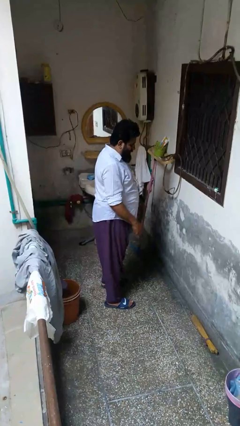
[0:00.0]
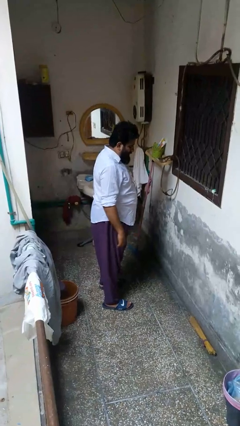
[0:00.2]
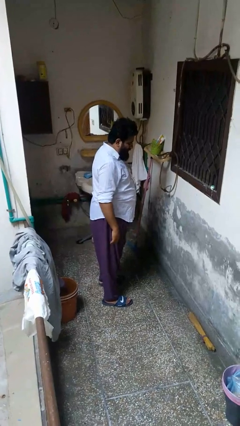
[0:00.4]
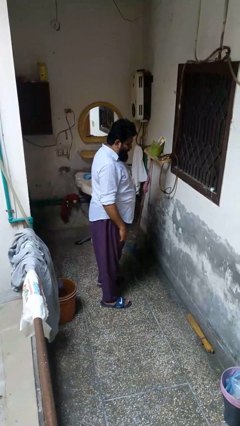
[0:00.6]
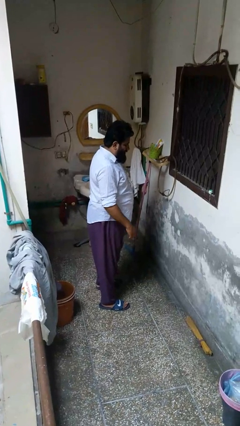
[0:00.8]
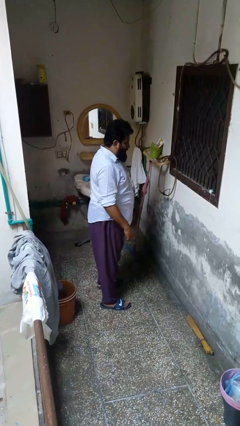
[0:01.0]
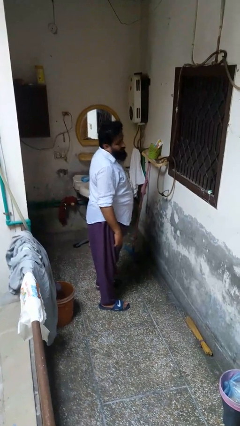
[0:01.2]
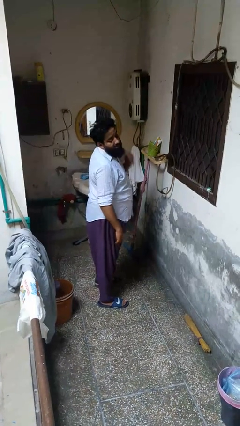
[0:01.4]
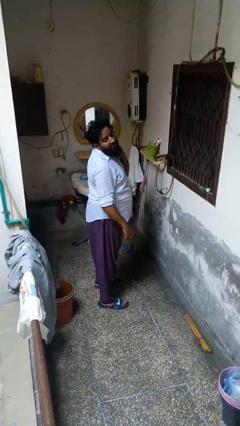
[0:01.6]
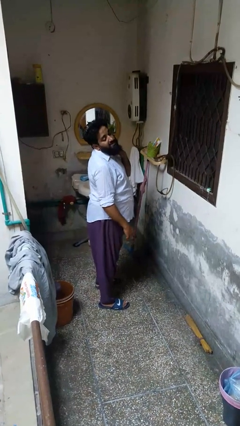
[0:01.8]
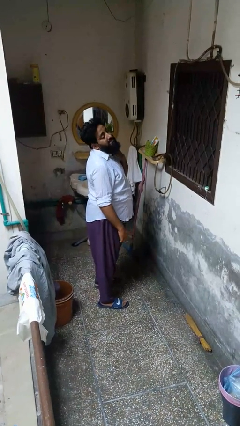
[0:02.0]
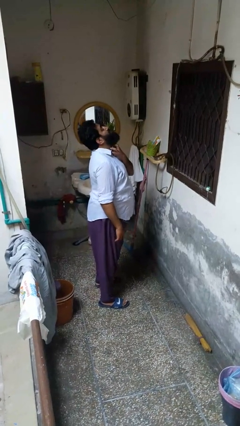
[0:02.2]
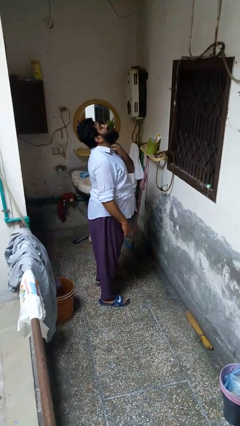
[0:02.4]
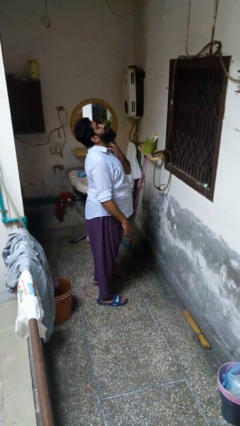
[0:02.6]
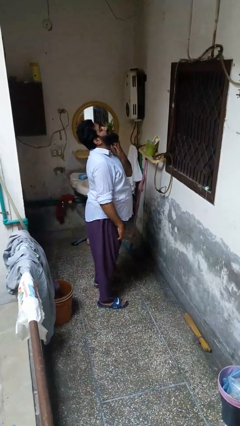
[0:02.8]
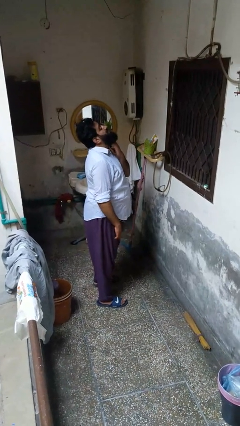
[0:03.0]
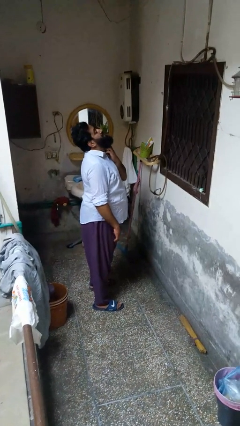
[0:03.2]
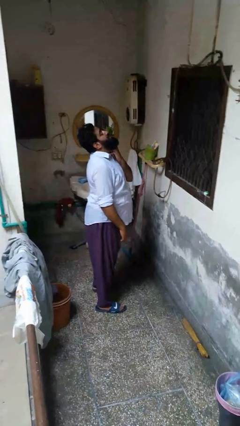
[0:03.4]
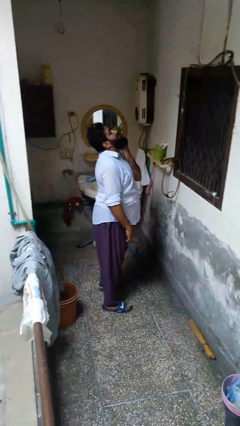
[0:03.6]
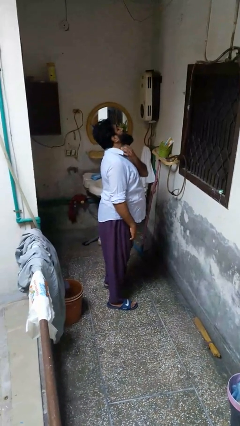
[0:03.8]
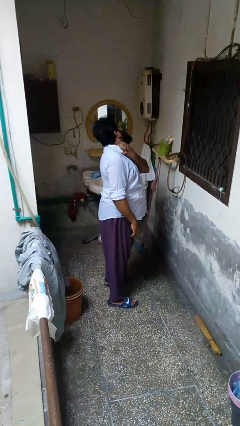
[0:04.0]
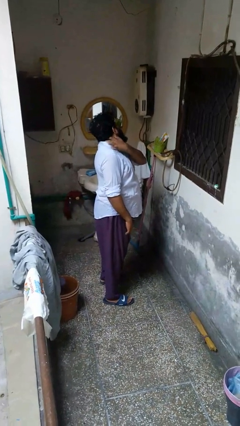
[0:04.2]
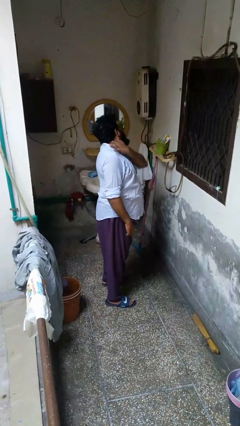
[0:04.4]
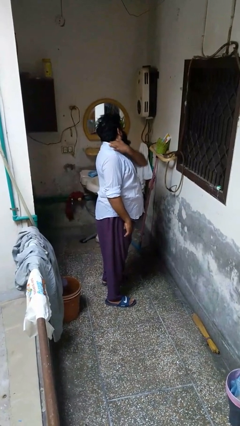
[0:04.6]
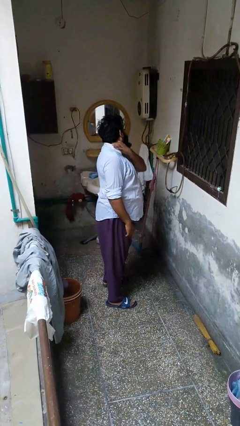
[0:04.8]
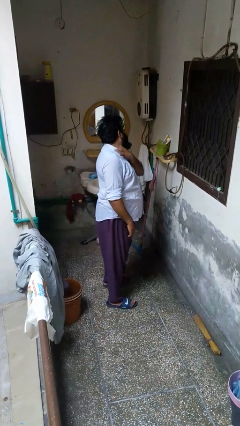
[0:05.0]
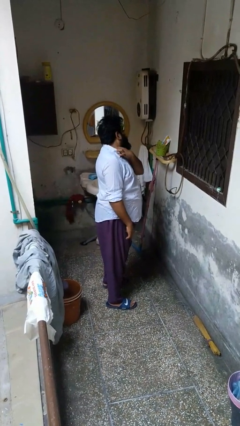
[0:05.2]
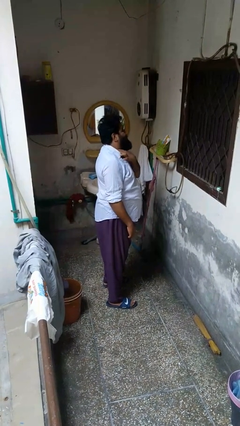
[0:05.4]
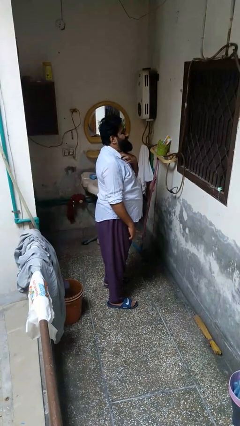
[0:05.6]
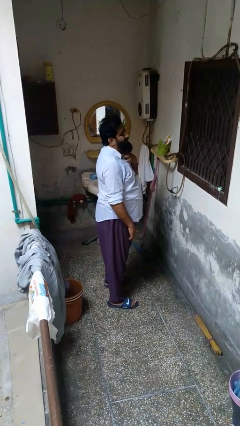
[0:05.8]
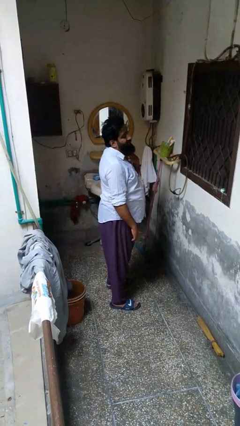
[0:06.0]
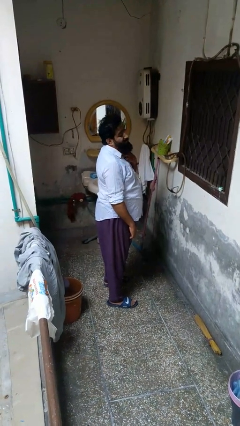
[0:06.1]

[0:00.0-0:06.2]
person rubs neck

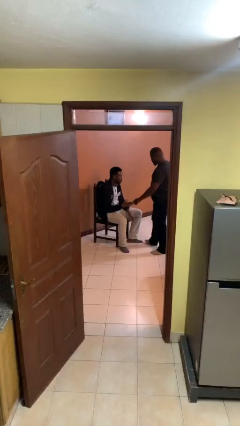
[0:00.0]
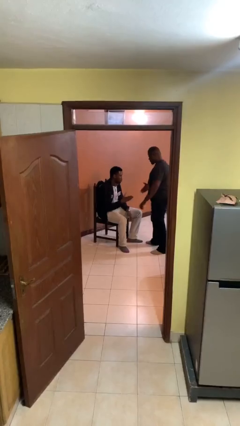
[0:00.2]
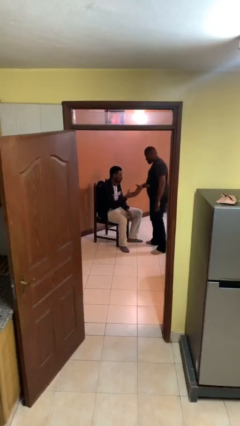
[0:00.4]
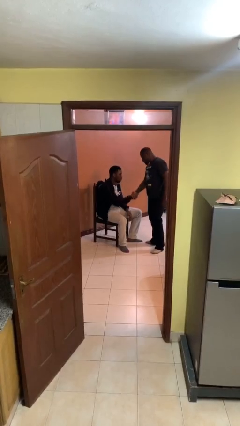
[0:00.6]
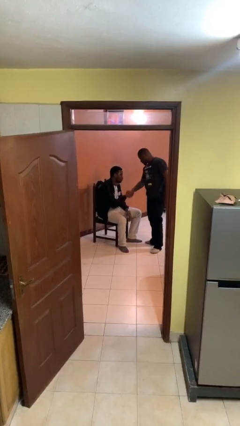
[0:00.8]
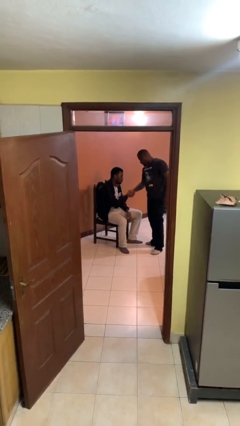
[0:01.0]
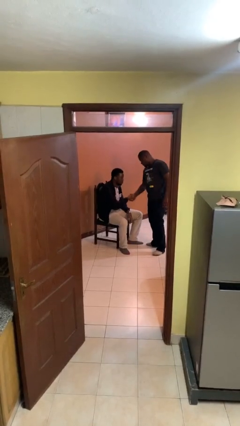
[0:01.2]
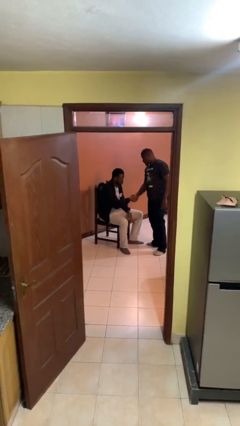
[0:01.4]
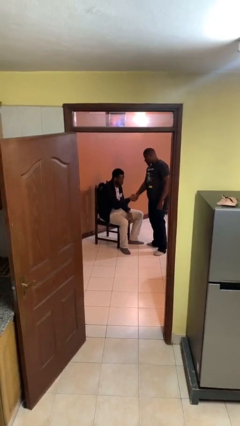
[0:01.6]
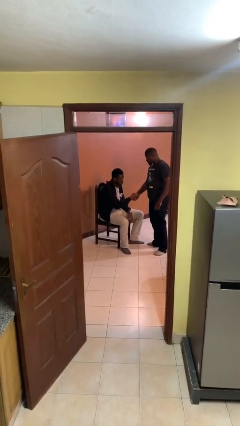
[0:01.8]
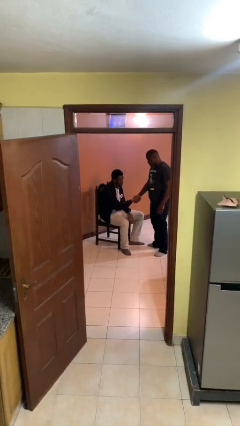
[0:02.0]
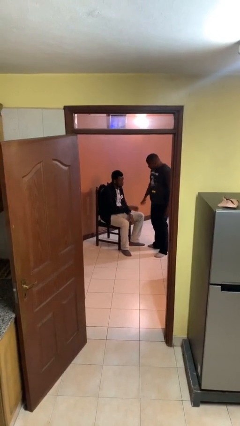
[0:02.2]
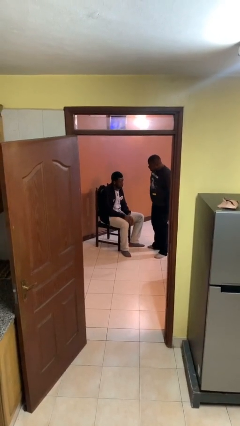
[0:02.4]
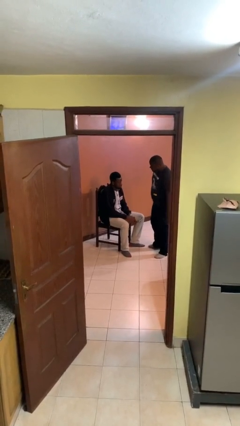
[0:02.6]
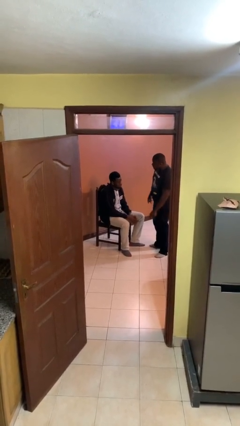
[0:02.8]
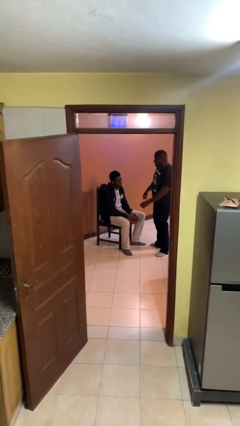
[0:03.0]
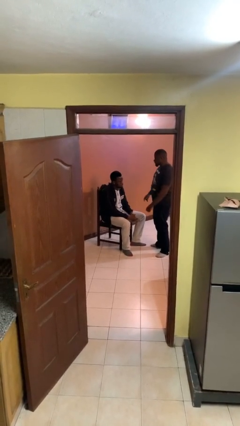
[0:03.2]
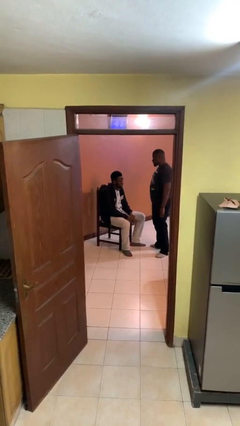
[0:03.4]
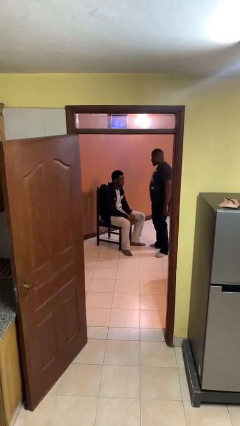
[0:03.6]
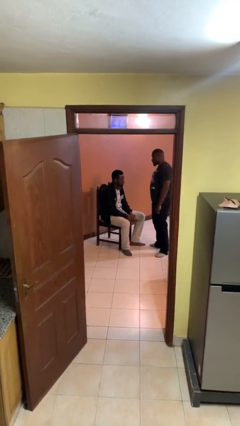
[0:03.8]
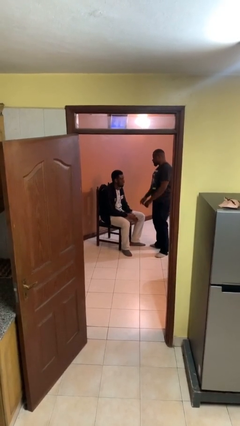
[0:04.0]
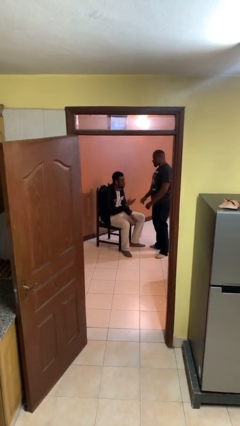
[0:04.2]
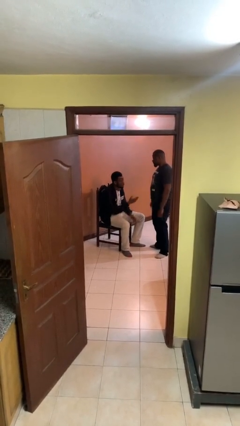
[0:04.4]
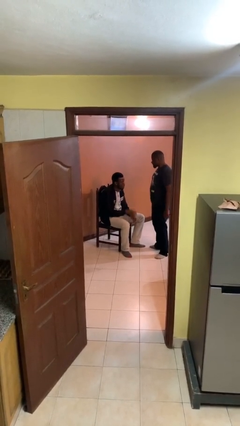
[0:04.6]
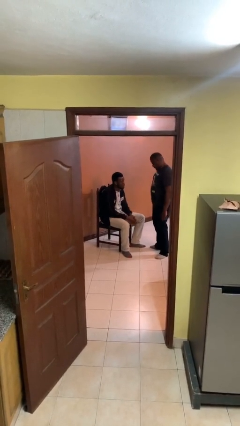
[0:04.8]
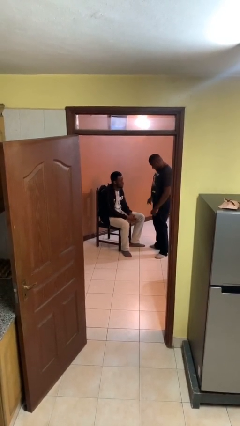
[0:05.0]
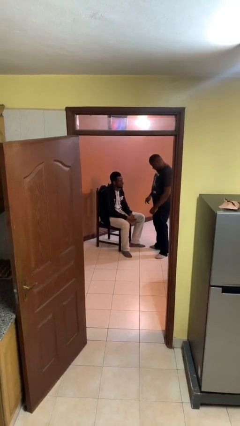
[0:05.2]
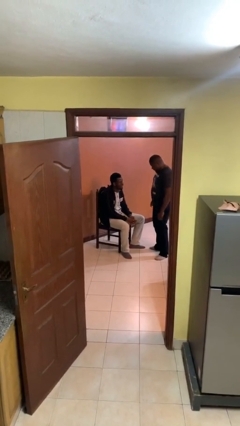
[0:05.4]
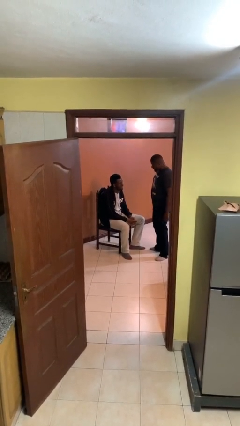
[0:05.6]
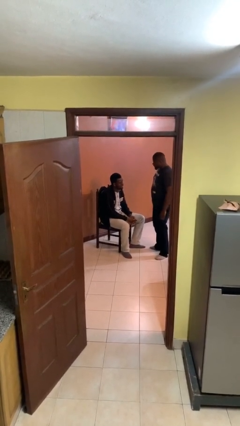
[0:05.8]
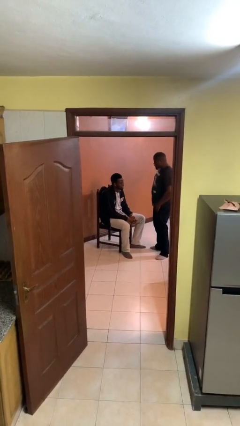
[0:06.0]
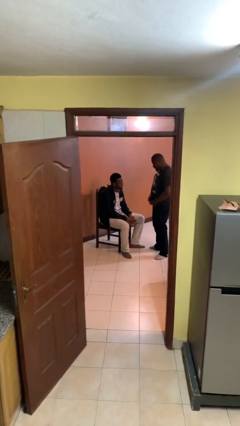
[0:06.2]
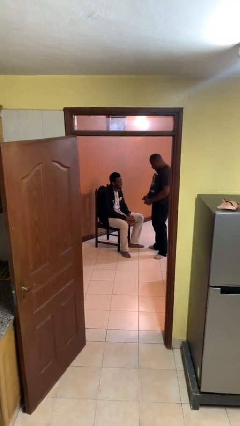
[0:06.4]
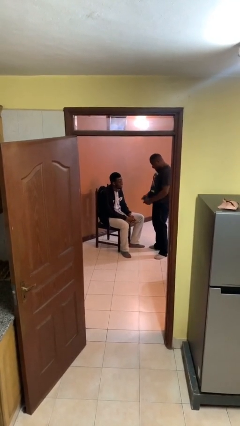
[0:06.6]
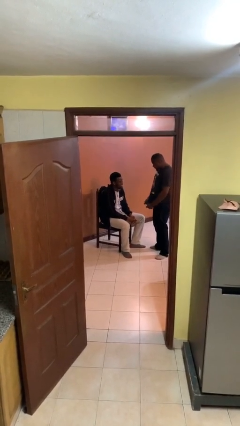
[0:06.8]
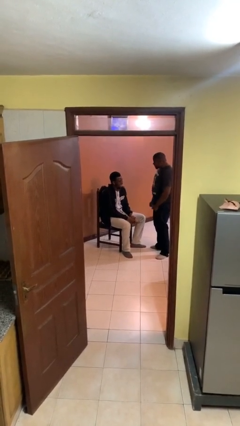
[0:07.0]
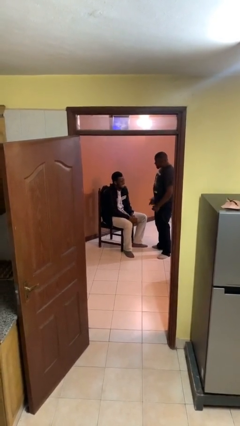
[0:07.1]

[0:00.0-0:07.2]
person shakes hand

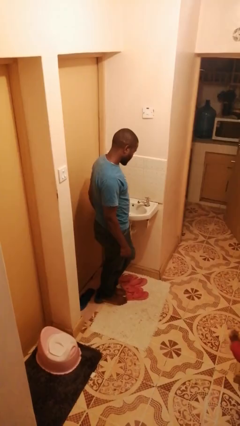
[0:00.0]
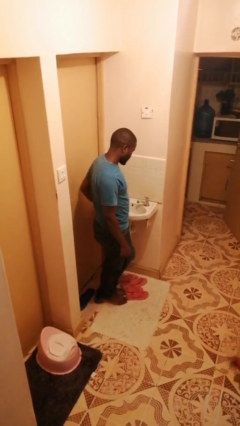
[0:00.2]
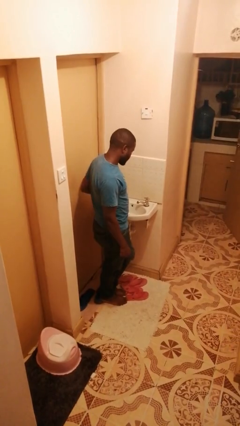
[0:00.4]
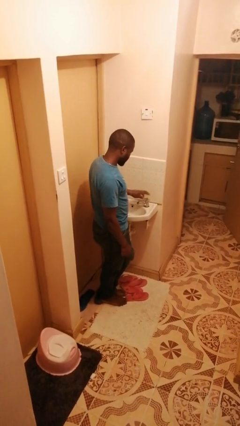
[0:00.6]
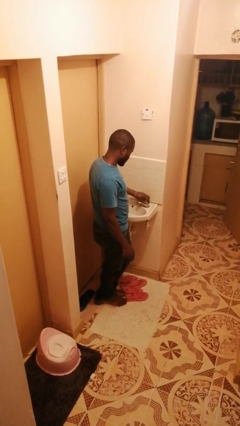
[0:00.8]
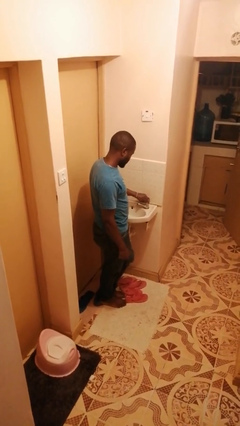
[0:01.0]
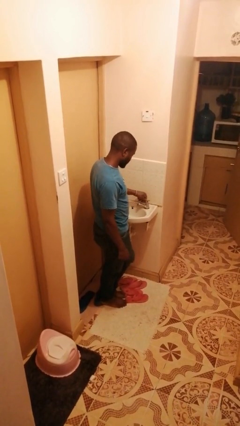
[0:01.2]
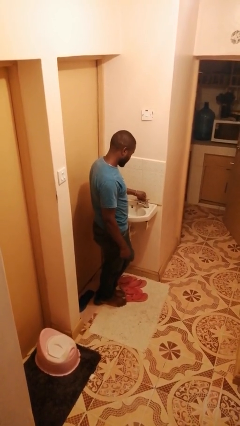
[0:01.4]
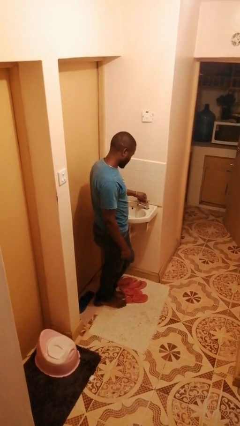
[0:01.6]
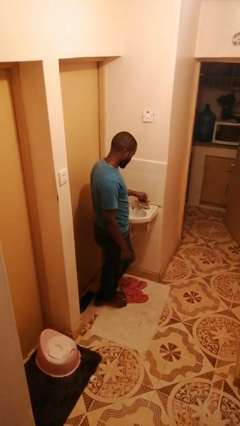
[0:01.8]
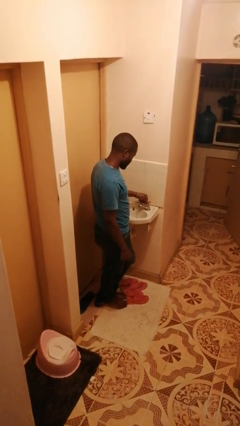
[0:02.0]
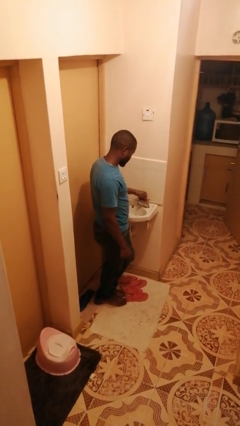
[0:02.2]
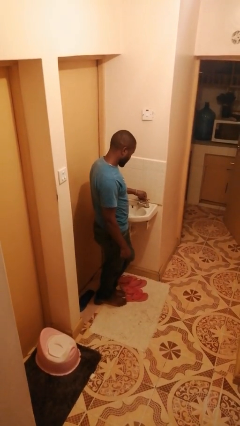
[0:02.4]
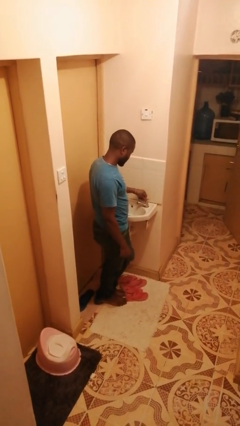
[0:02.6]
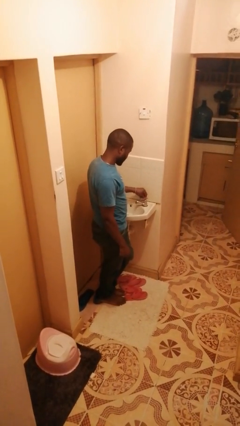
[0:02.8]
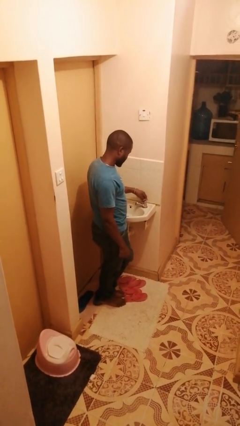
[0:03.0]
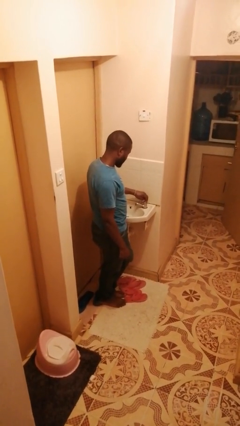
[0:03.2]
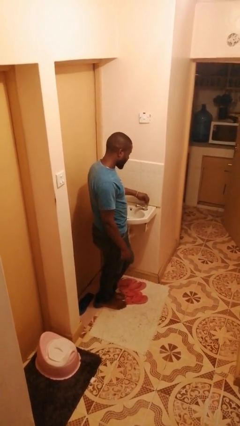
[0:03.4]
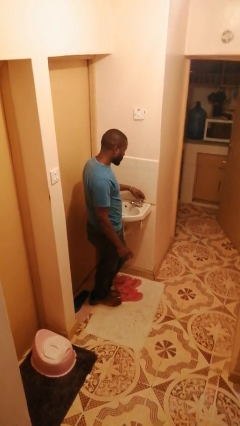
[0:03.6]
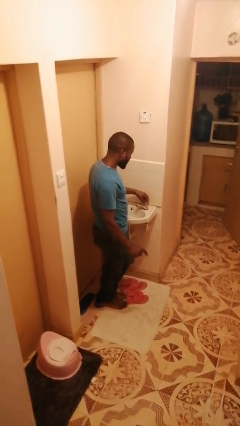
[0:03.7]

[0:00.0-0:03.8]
person turns on faucet

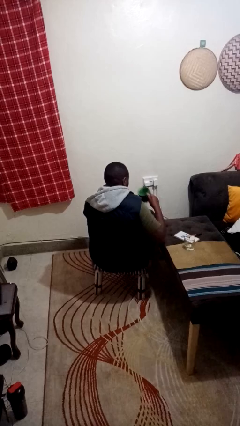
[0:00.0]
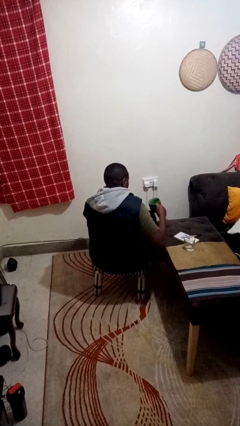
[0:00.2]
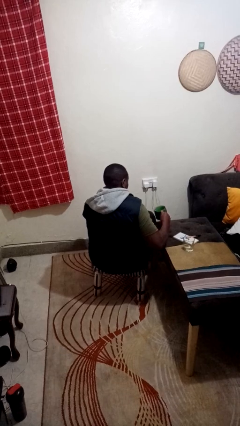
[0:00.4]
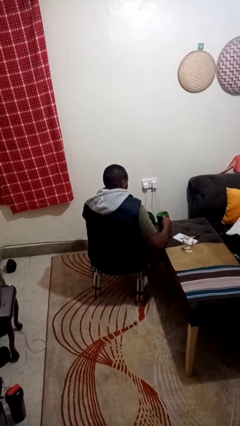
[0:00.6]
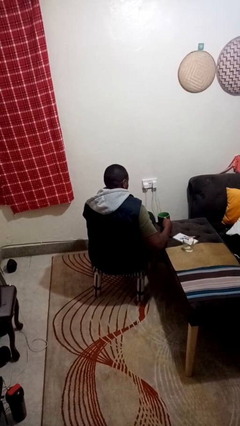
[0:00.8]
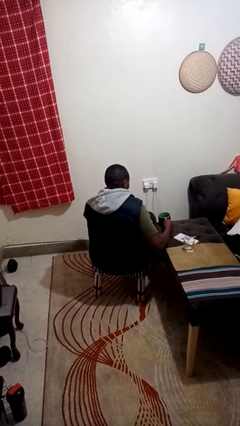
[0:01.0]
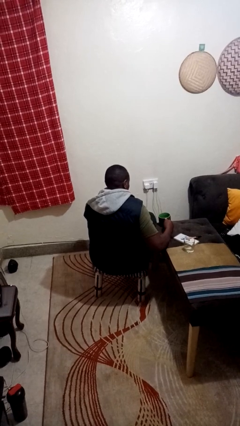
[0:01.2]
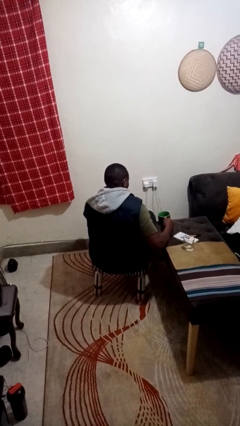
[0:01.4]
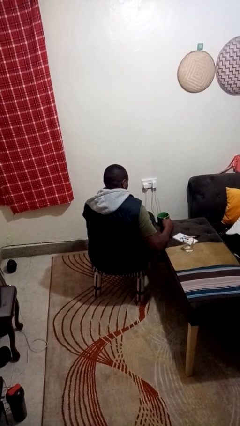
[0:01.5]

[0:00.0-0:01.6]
person puts down object on table
